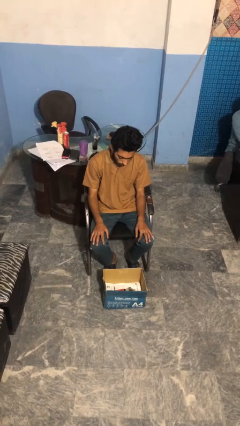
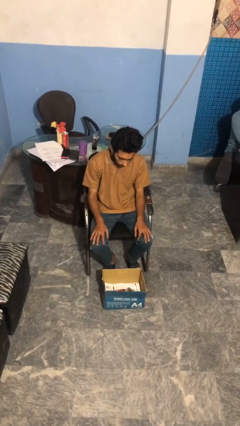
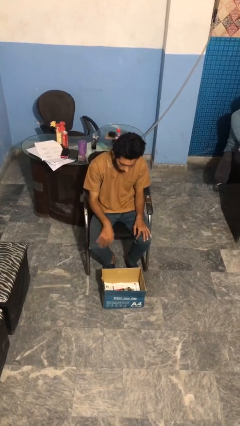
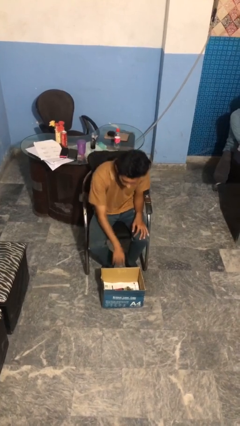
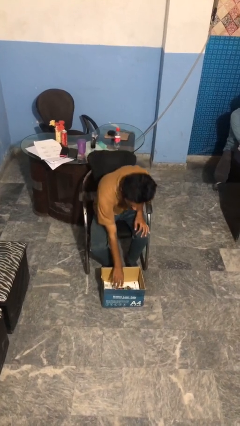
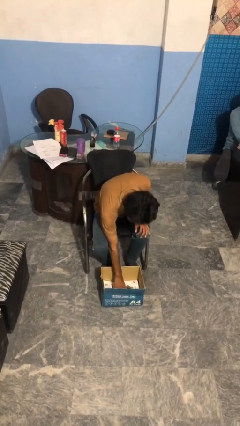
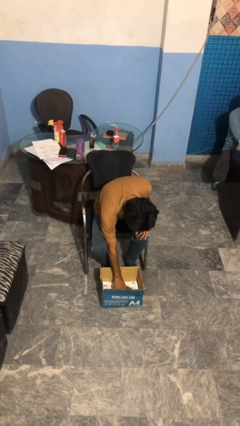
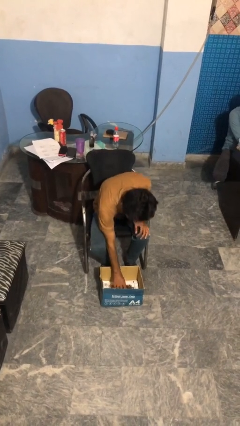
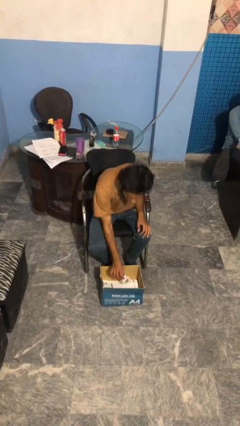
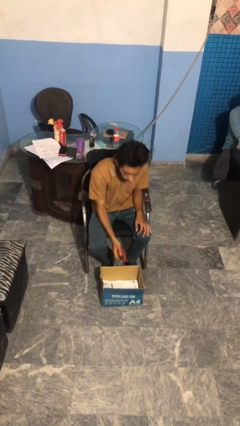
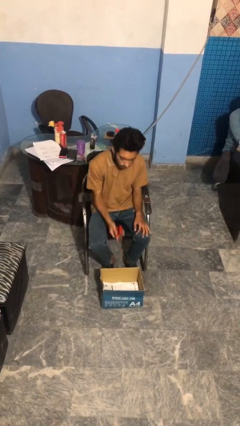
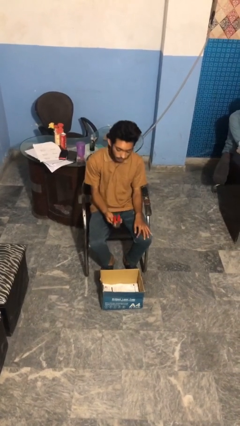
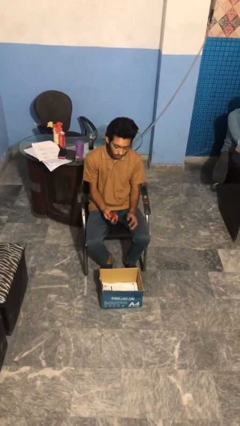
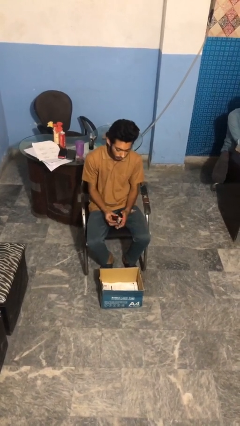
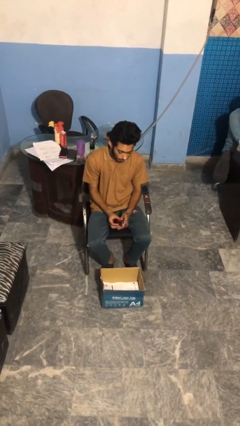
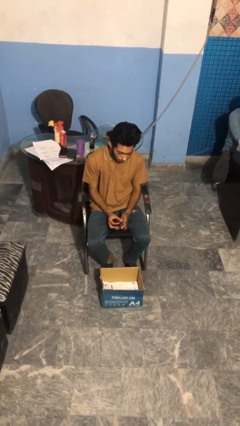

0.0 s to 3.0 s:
person takes object from box

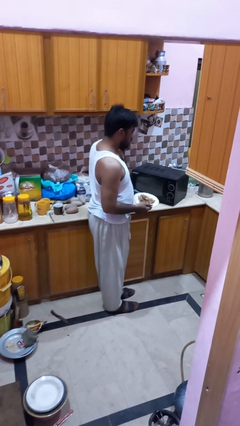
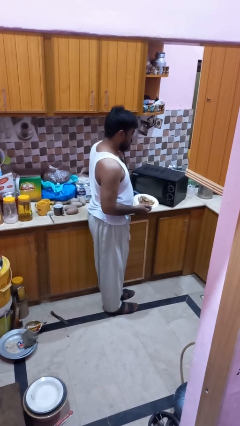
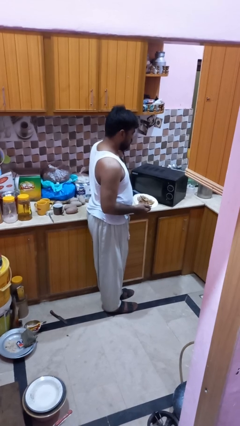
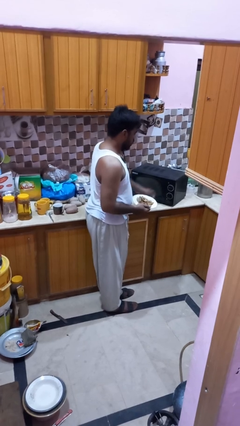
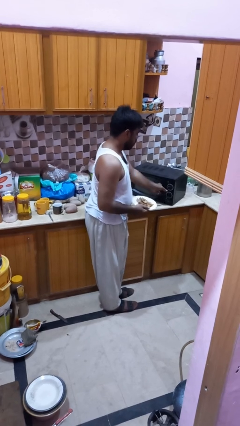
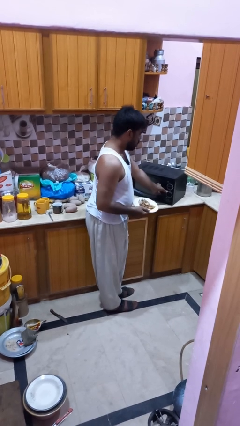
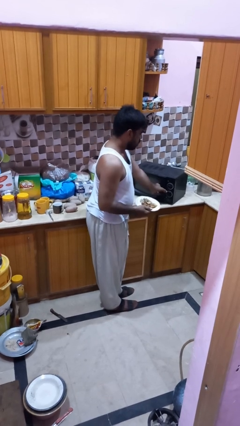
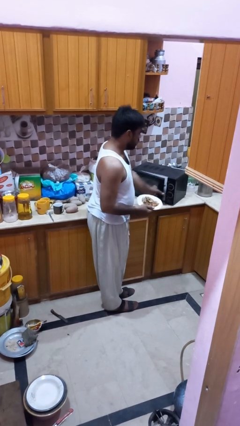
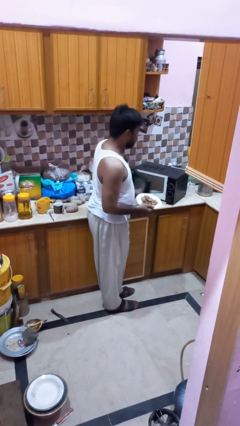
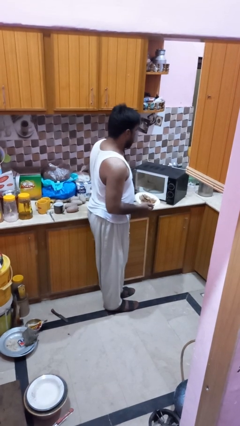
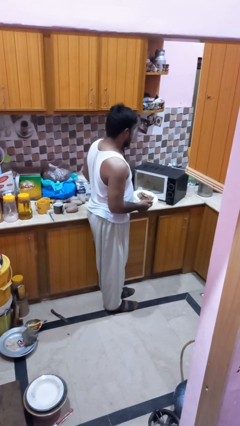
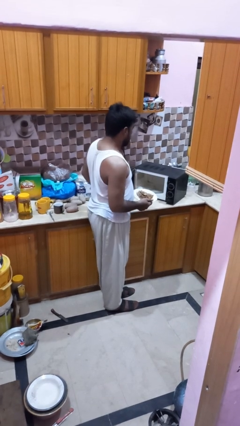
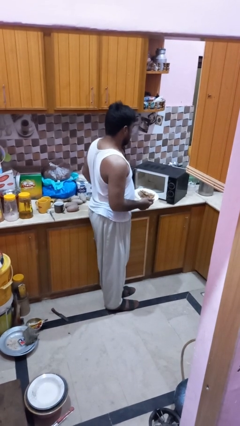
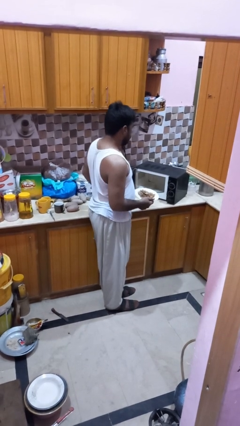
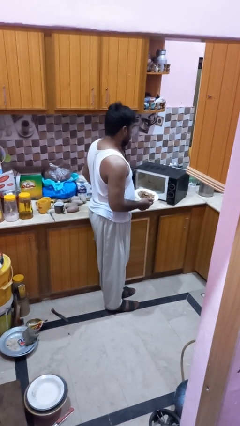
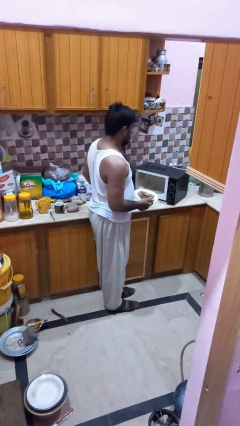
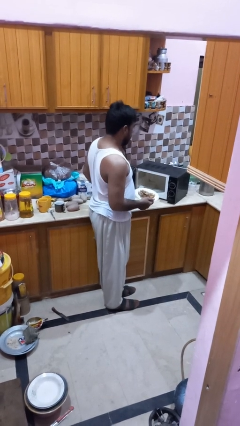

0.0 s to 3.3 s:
person opens microwave

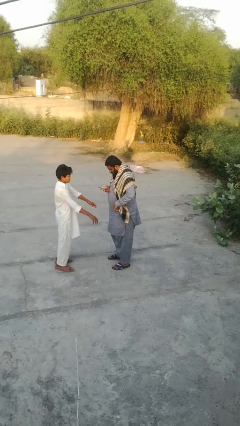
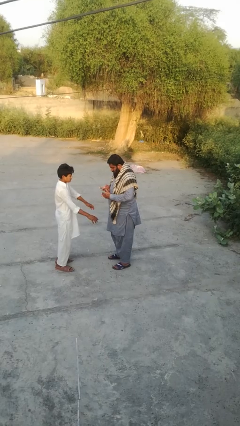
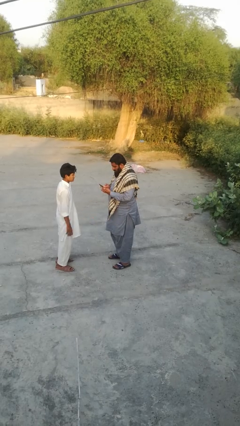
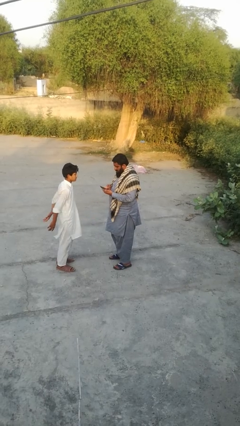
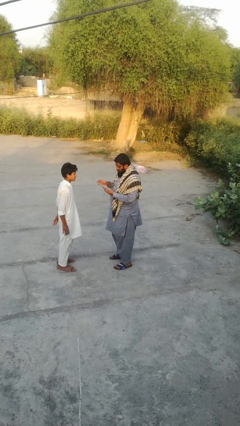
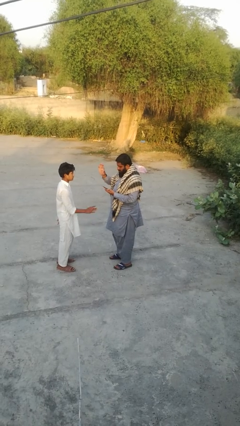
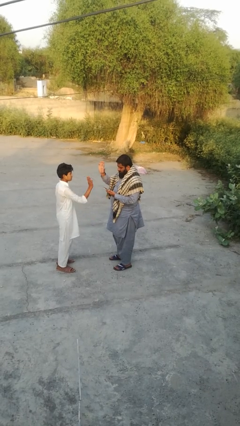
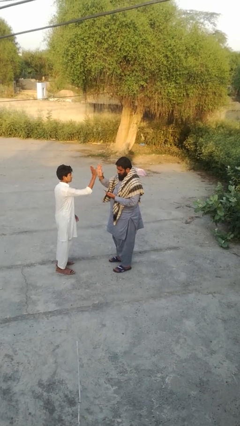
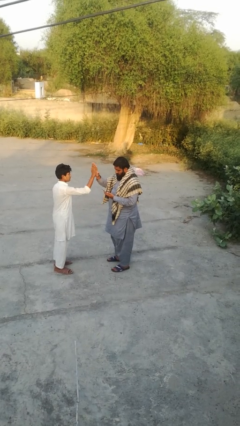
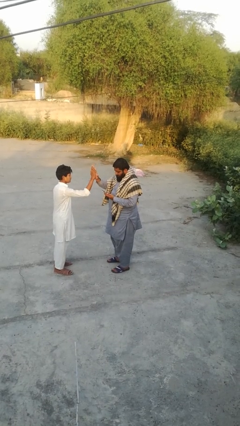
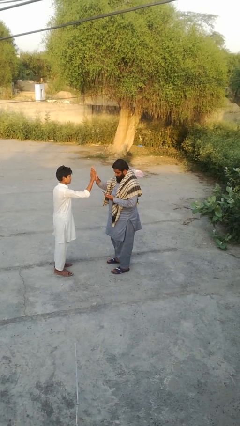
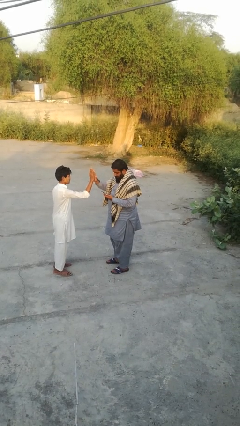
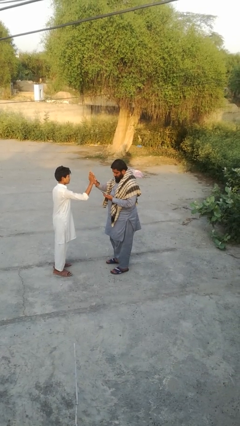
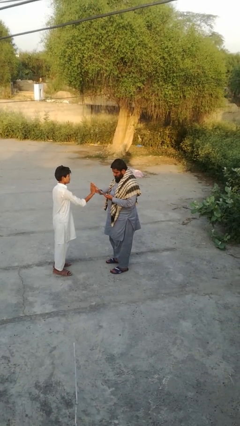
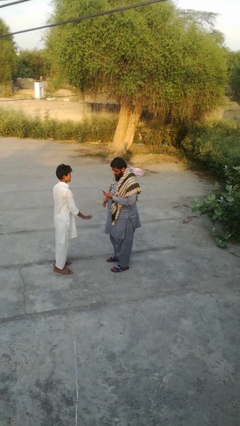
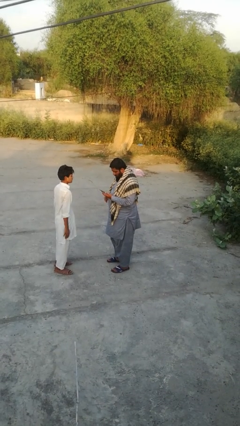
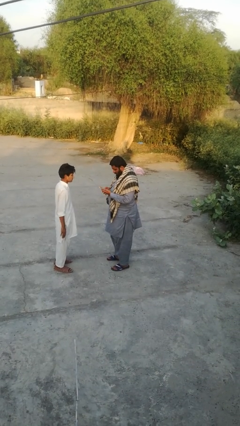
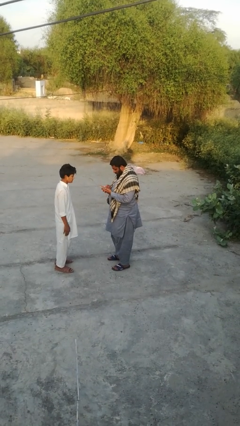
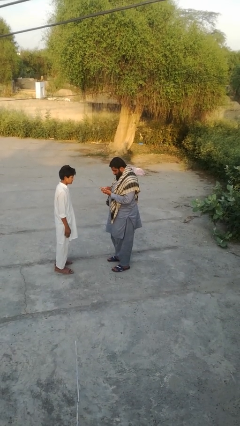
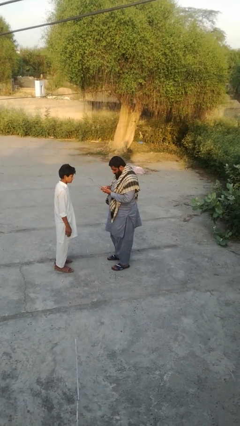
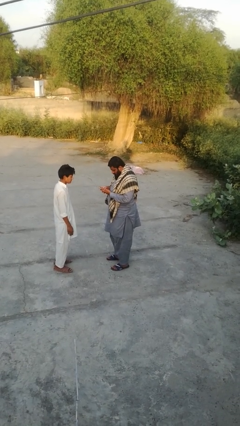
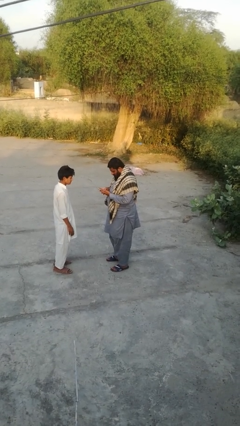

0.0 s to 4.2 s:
person highfives hand

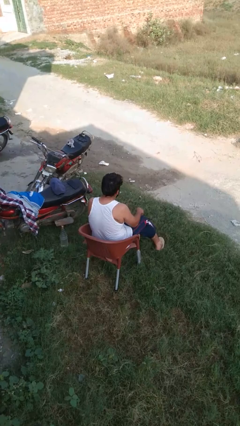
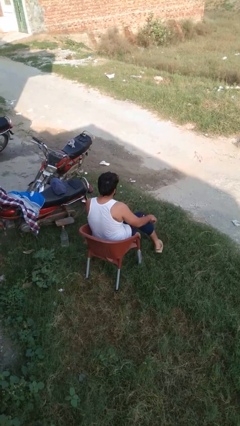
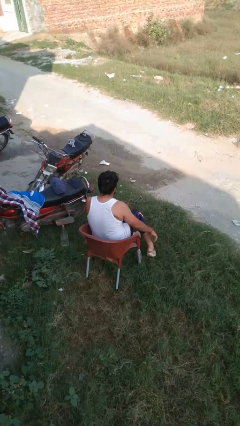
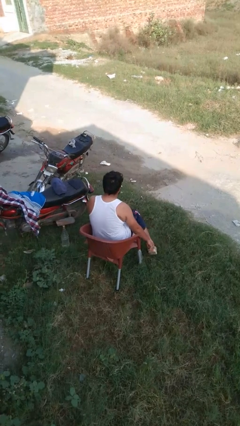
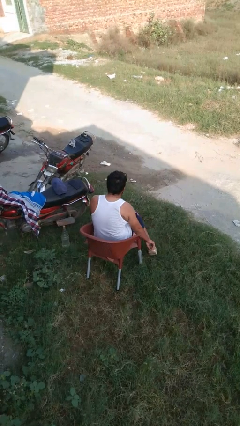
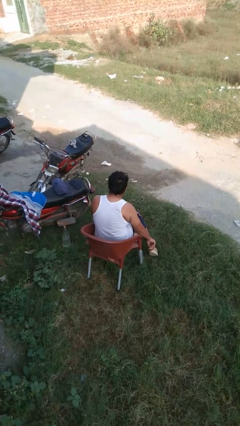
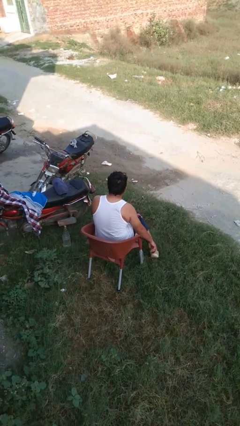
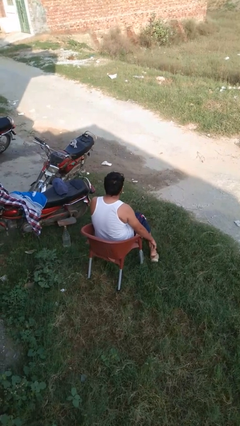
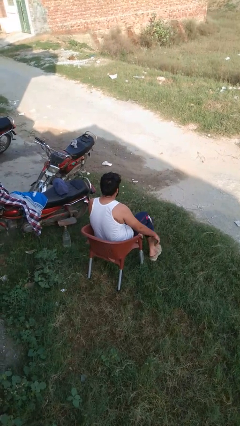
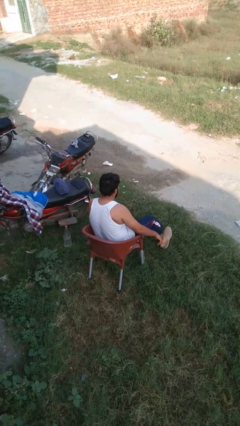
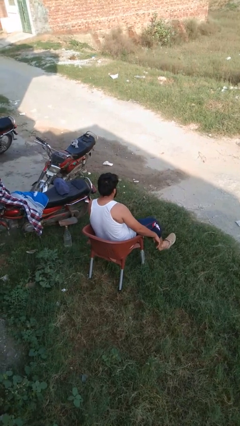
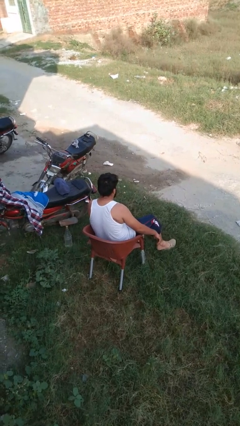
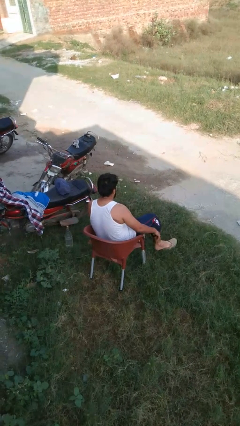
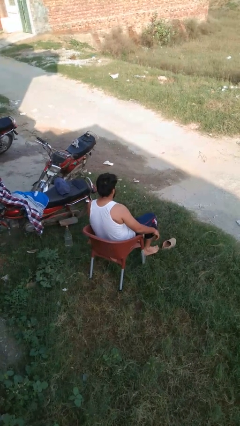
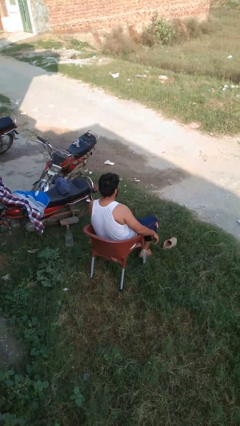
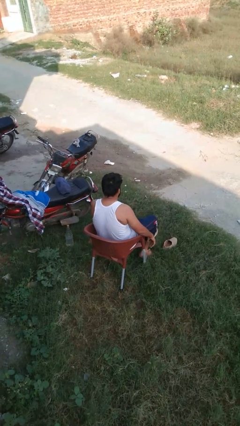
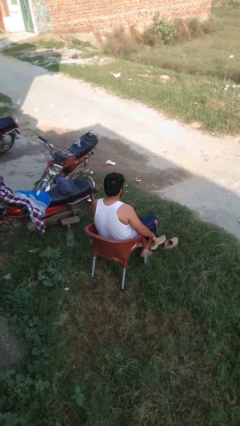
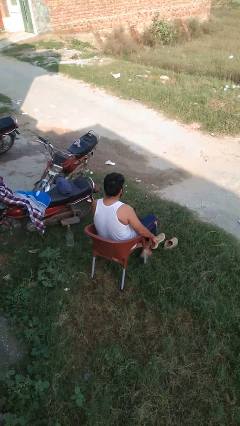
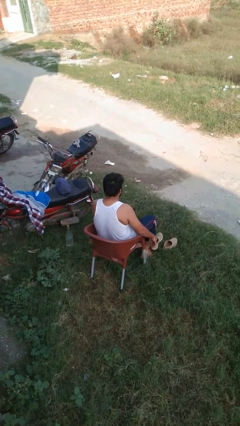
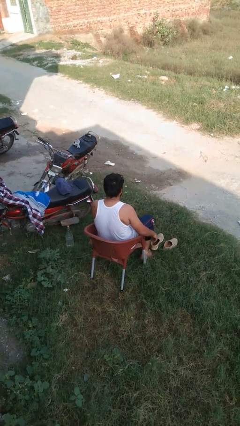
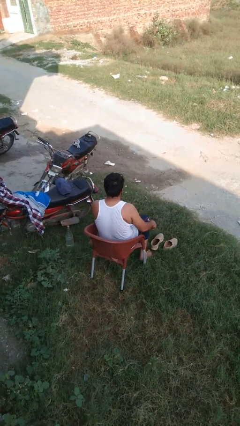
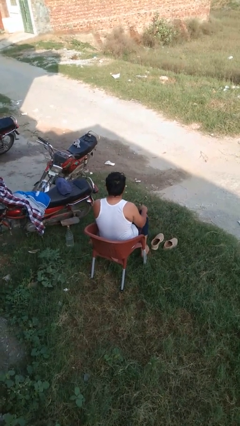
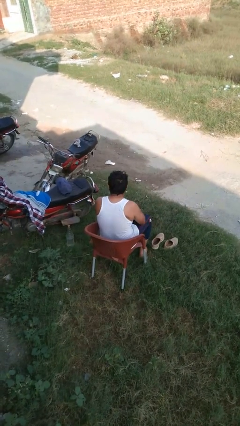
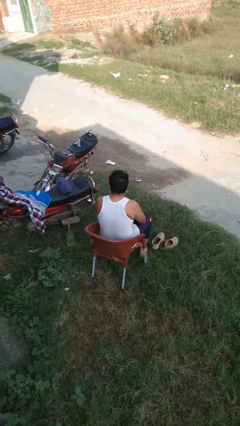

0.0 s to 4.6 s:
person takes off shoes

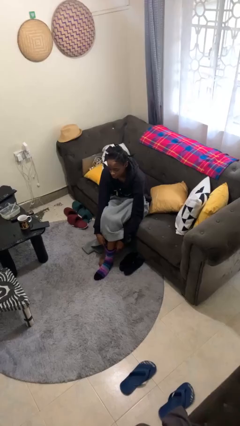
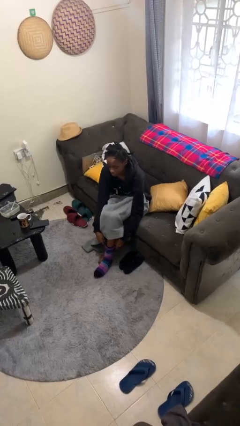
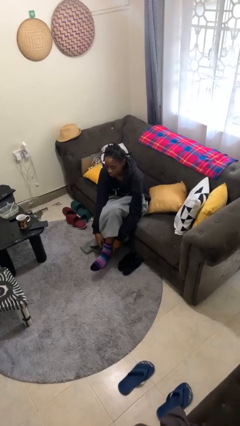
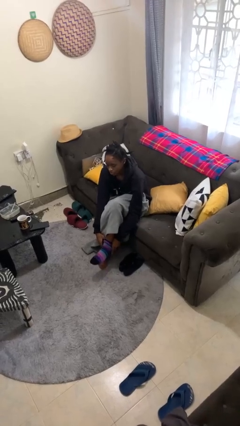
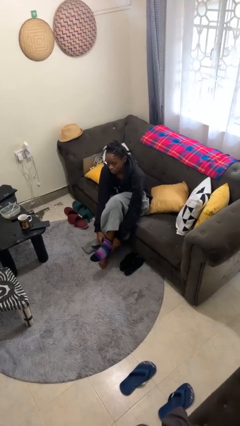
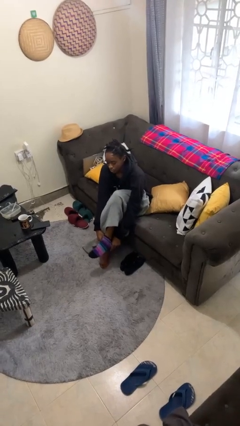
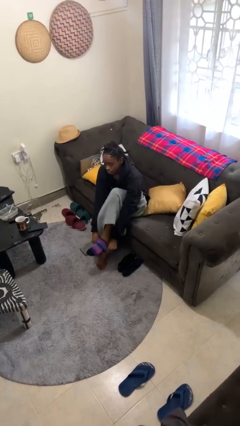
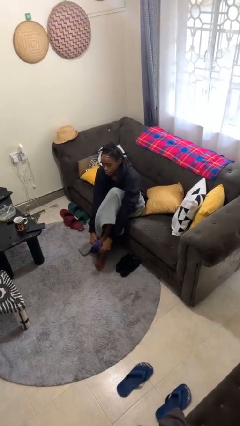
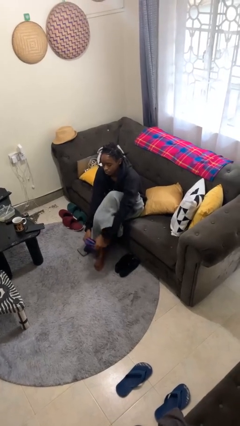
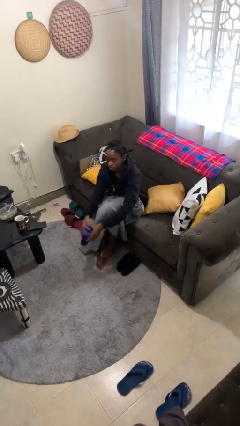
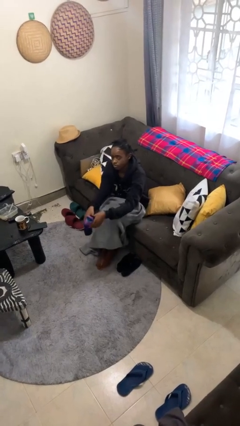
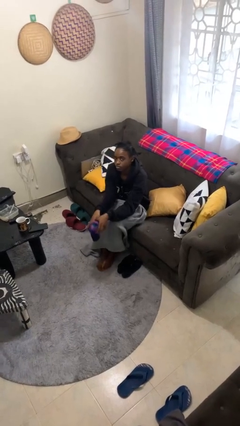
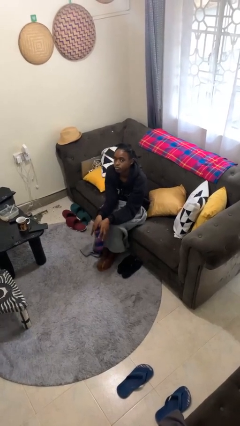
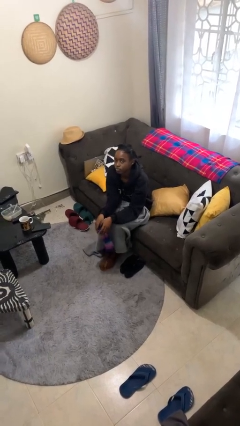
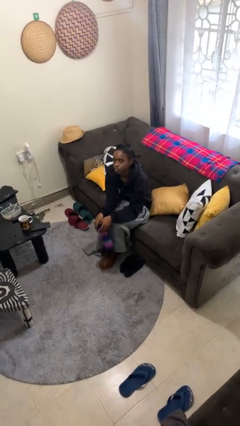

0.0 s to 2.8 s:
person takes off socks
